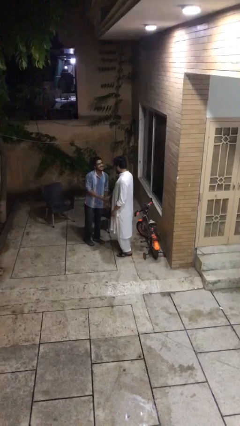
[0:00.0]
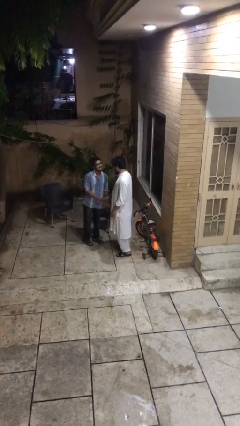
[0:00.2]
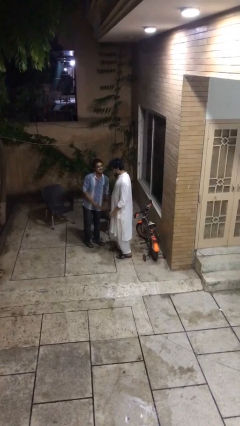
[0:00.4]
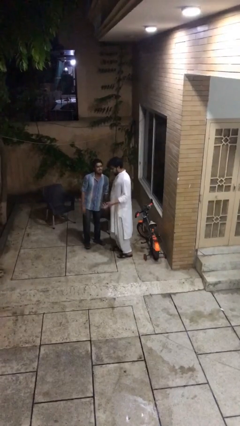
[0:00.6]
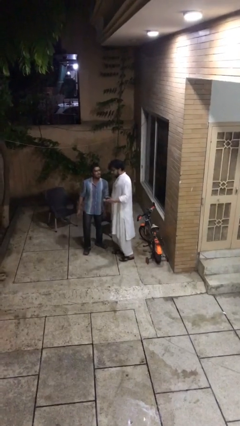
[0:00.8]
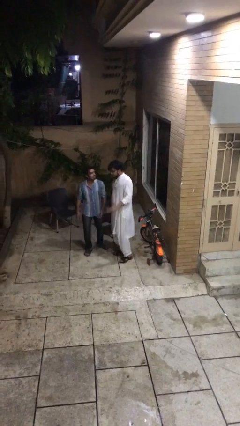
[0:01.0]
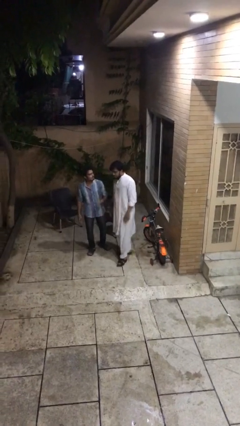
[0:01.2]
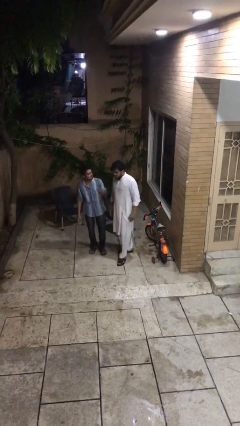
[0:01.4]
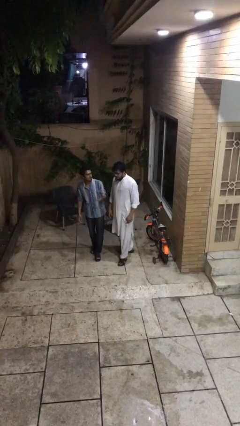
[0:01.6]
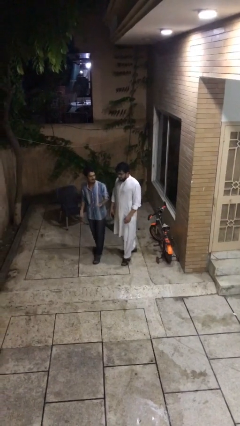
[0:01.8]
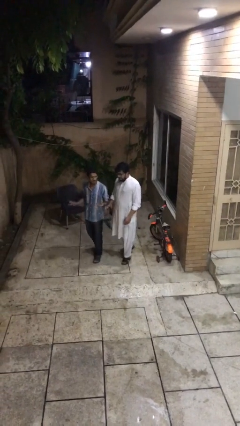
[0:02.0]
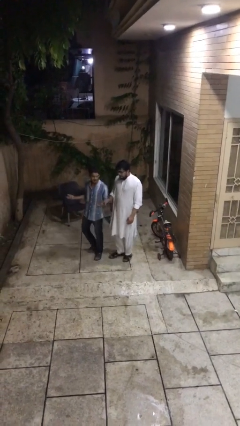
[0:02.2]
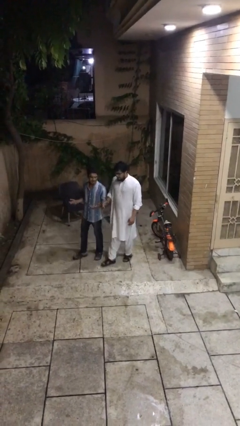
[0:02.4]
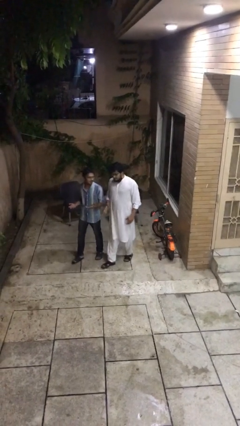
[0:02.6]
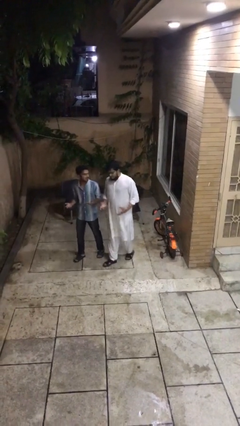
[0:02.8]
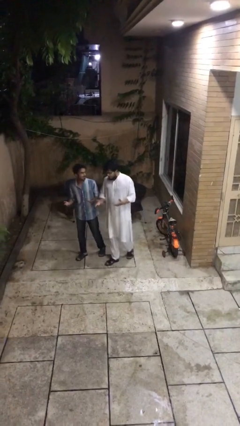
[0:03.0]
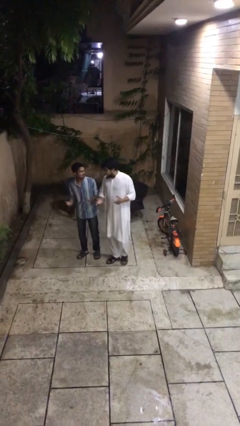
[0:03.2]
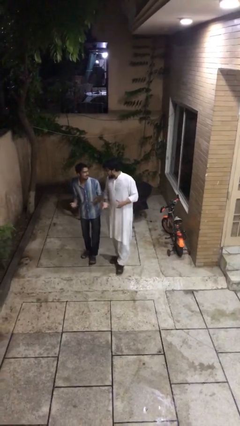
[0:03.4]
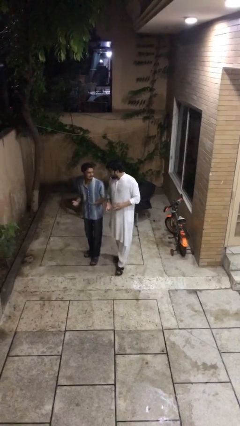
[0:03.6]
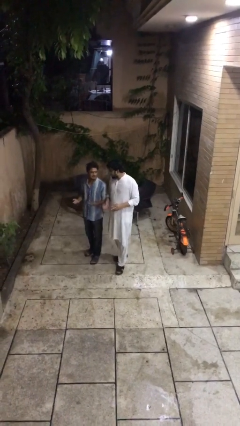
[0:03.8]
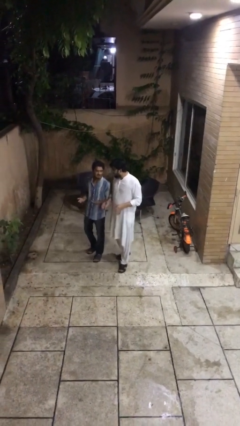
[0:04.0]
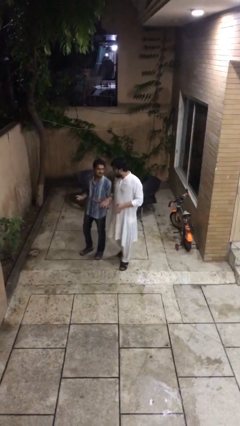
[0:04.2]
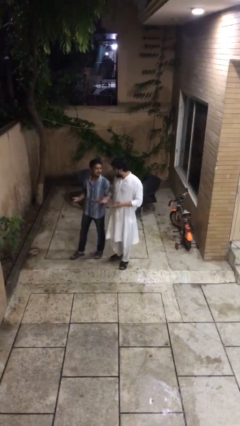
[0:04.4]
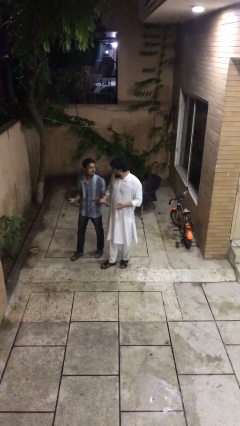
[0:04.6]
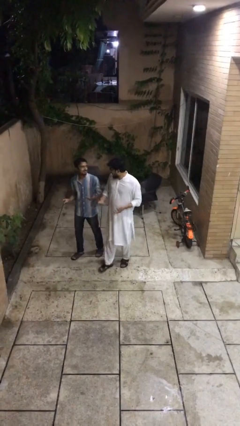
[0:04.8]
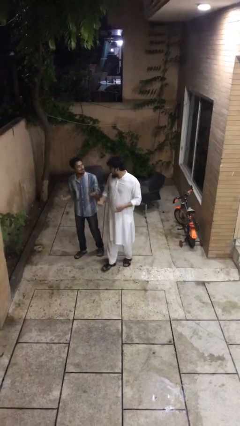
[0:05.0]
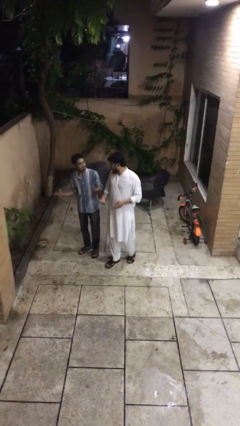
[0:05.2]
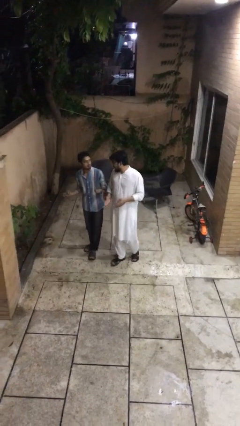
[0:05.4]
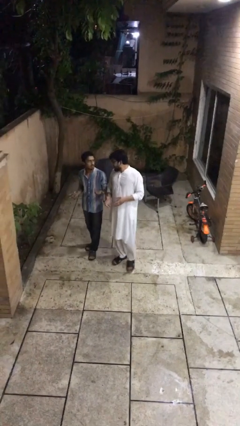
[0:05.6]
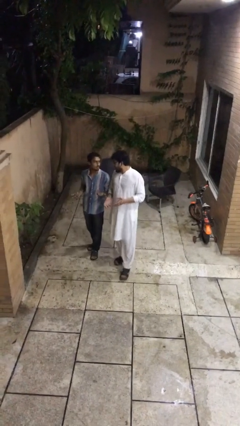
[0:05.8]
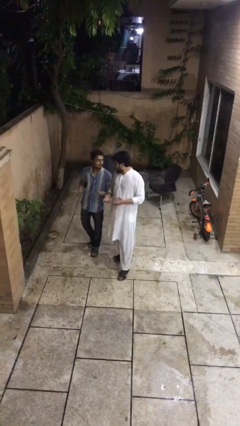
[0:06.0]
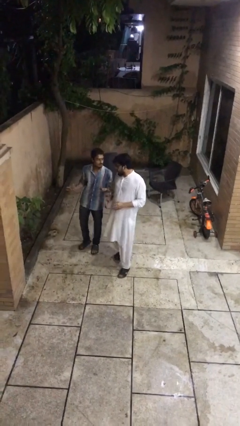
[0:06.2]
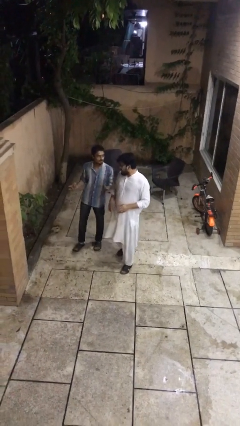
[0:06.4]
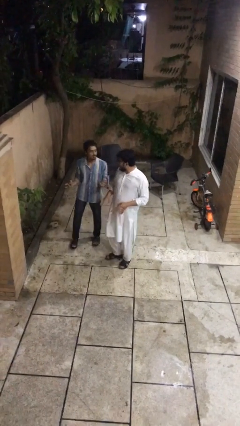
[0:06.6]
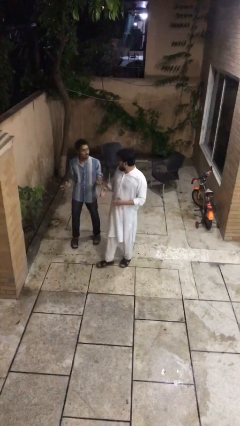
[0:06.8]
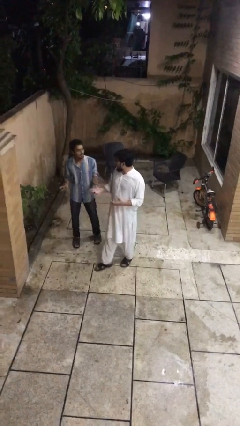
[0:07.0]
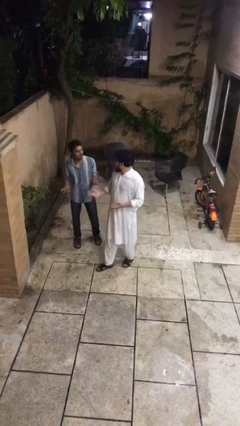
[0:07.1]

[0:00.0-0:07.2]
person talks to person

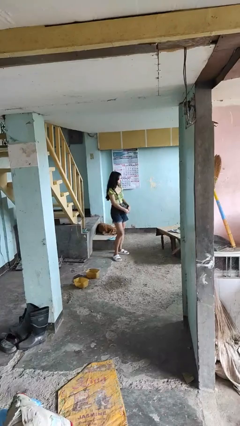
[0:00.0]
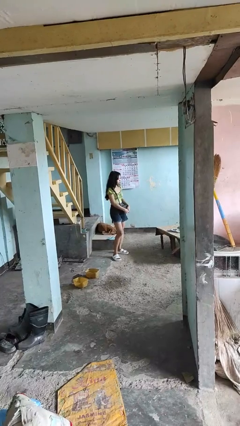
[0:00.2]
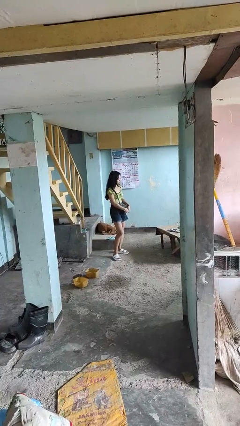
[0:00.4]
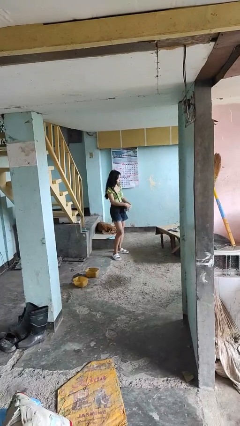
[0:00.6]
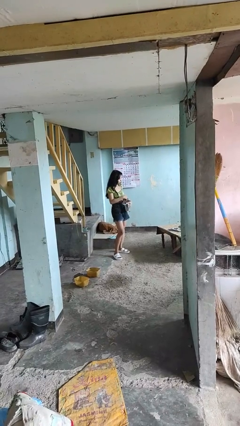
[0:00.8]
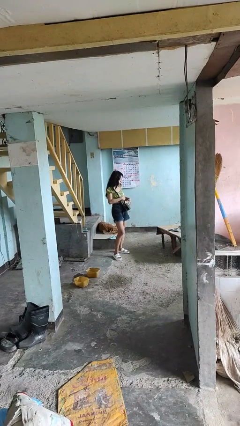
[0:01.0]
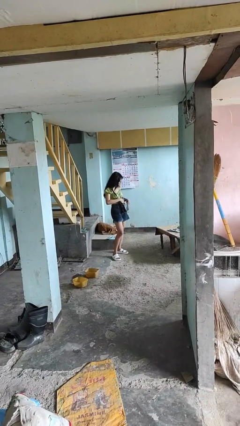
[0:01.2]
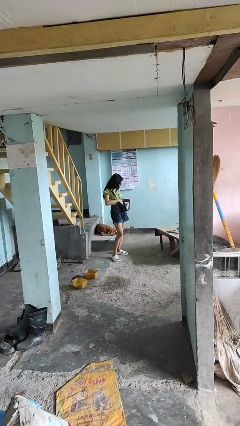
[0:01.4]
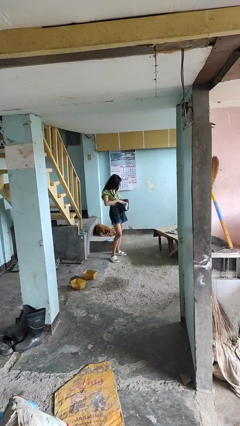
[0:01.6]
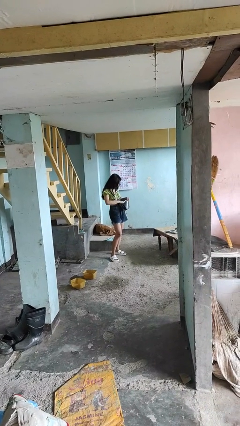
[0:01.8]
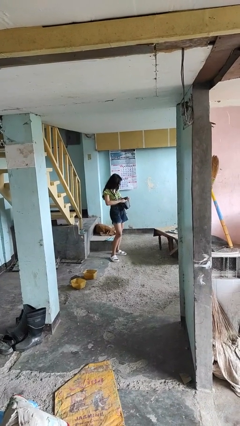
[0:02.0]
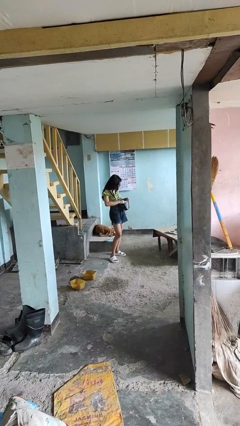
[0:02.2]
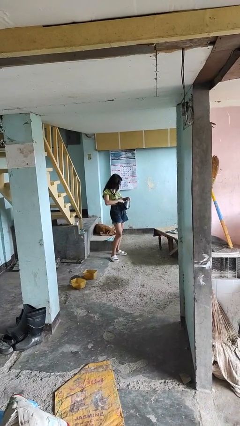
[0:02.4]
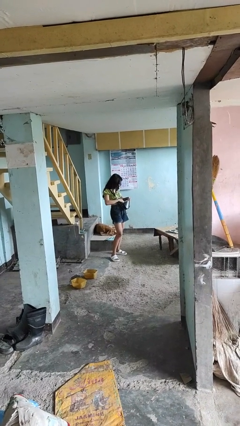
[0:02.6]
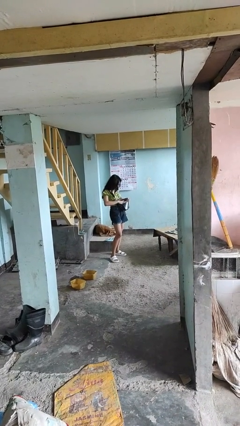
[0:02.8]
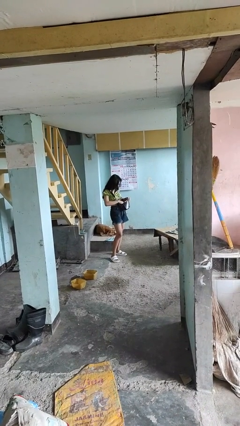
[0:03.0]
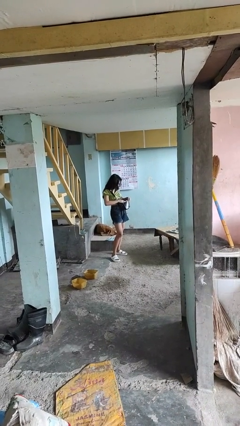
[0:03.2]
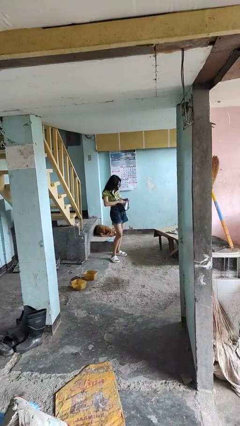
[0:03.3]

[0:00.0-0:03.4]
person searches in purse

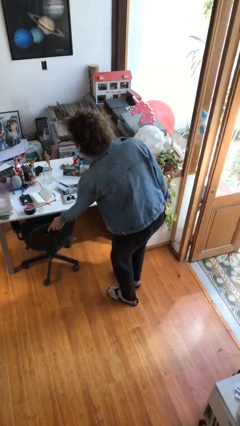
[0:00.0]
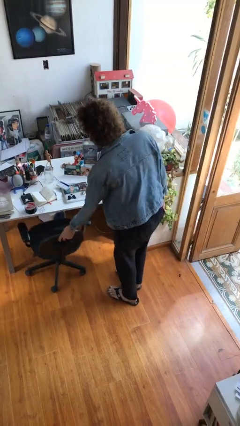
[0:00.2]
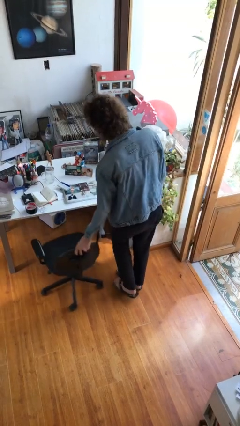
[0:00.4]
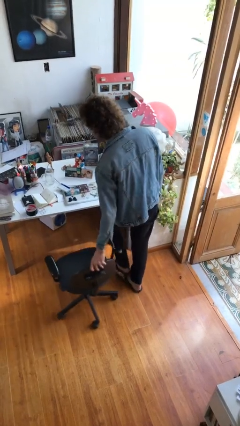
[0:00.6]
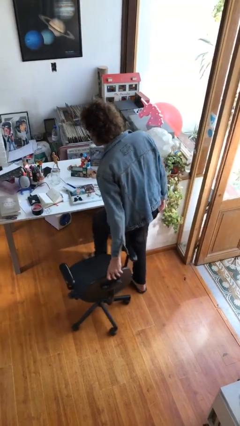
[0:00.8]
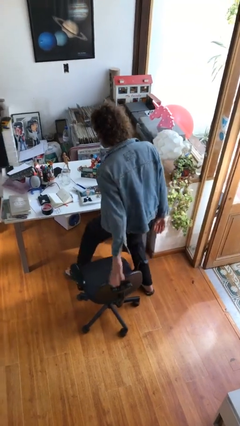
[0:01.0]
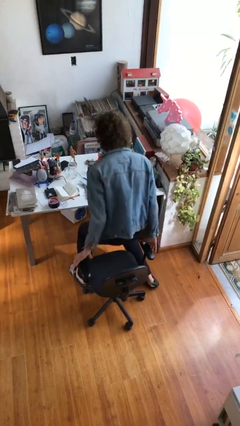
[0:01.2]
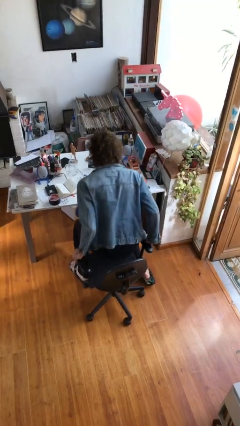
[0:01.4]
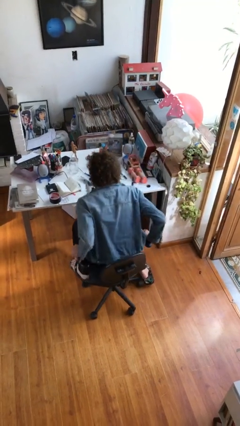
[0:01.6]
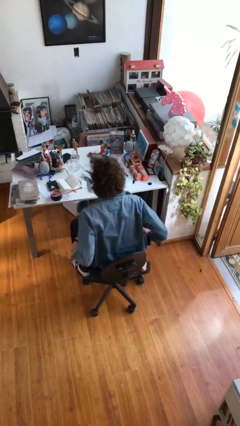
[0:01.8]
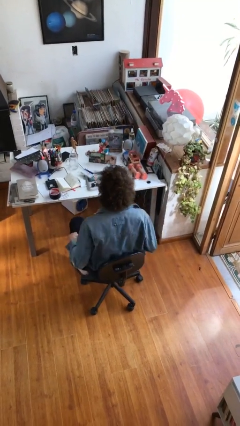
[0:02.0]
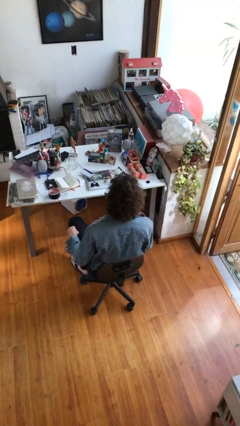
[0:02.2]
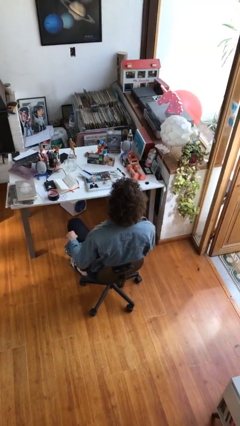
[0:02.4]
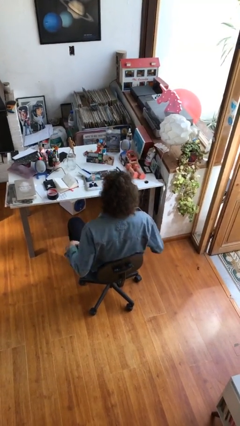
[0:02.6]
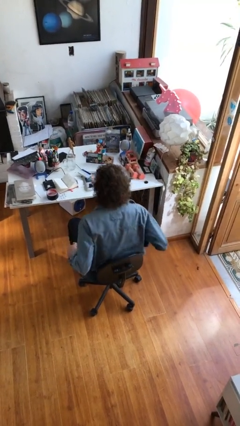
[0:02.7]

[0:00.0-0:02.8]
person sits down

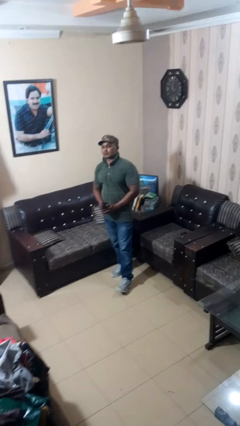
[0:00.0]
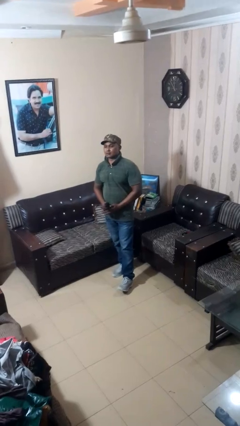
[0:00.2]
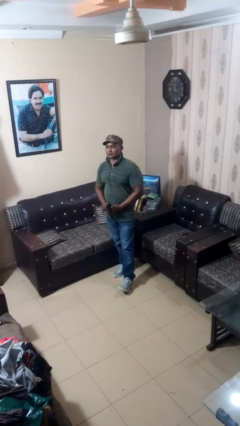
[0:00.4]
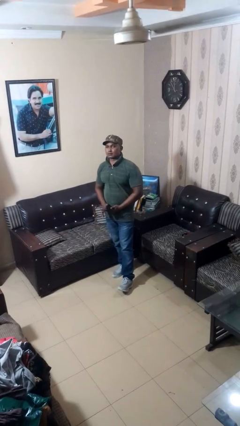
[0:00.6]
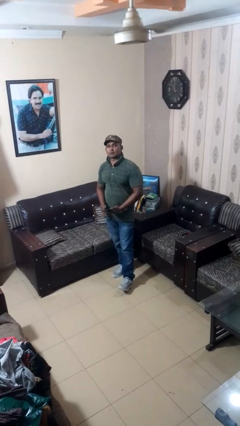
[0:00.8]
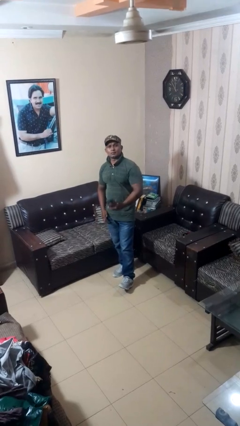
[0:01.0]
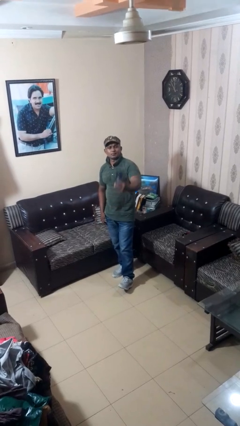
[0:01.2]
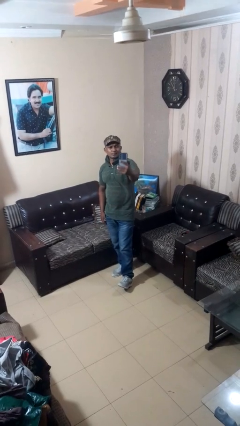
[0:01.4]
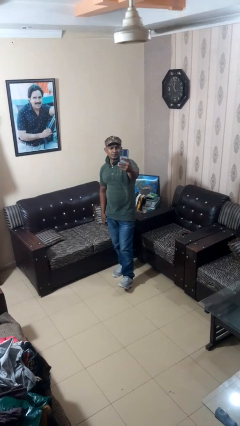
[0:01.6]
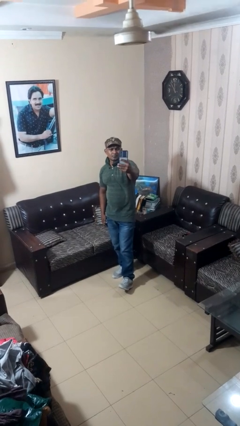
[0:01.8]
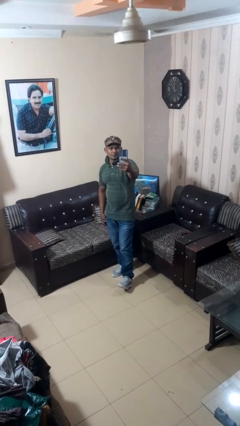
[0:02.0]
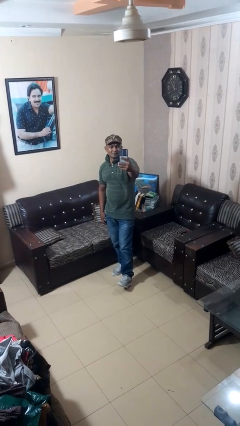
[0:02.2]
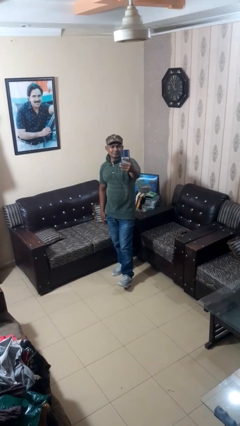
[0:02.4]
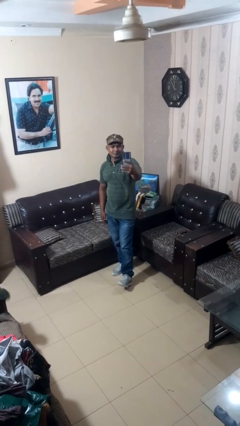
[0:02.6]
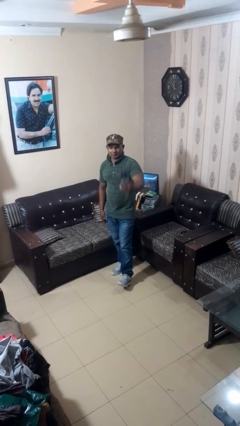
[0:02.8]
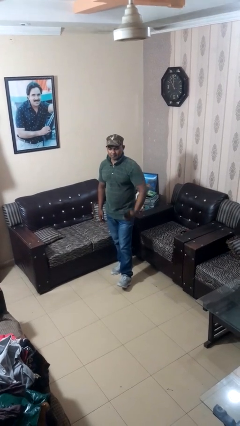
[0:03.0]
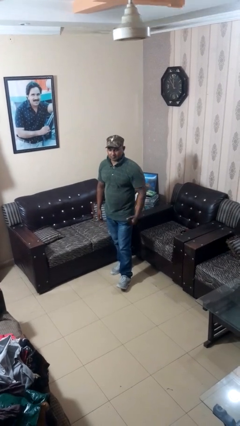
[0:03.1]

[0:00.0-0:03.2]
person takes selfie

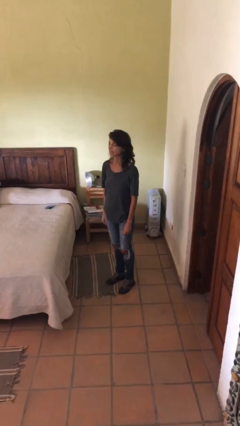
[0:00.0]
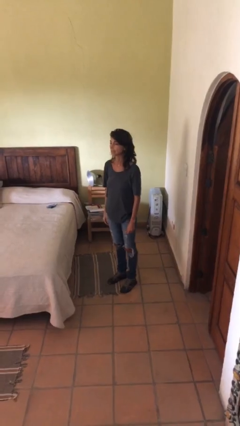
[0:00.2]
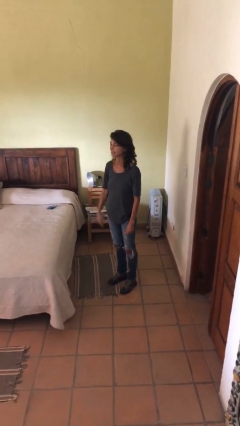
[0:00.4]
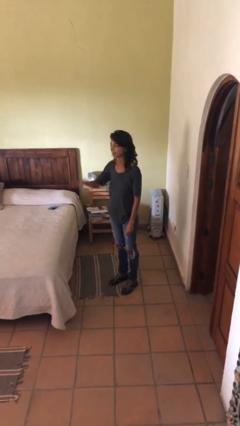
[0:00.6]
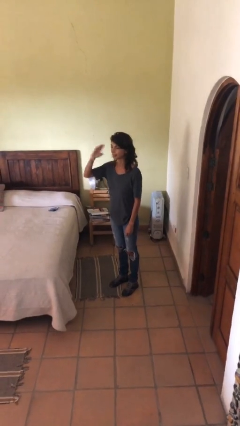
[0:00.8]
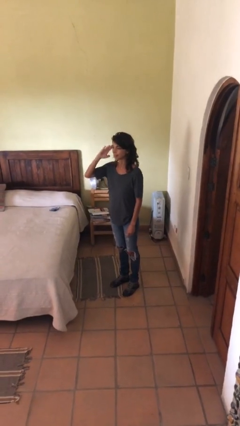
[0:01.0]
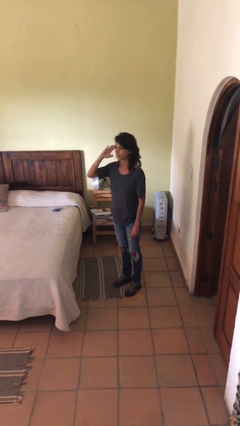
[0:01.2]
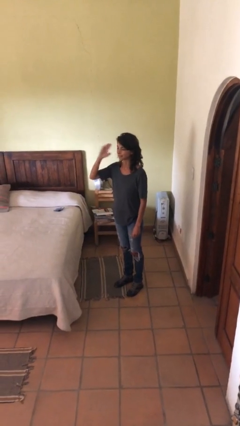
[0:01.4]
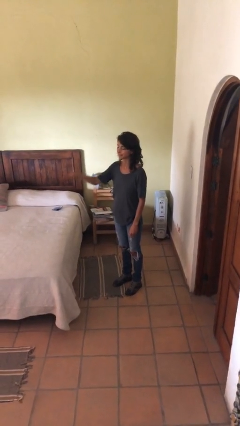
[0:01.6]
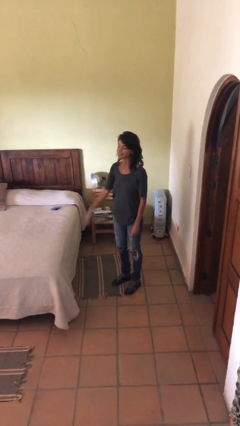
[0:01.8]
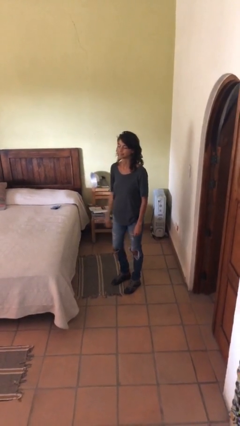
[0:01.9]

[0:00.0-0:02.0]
person salutes
